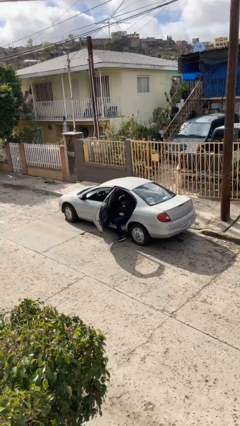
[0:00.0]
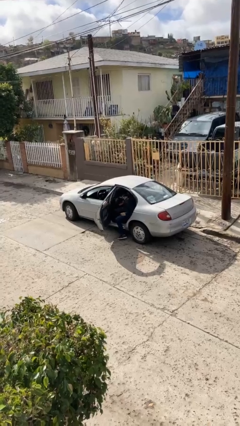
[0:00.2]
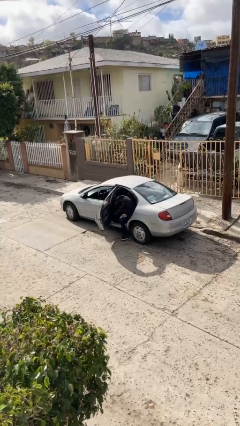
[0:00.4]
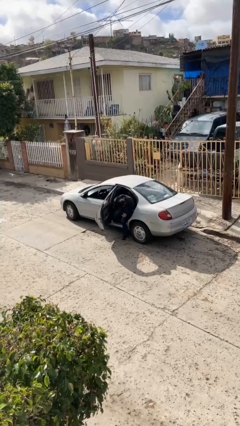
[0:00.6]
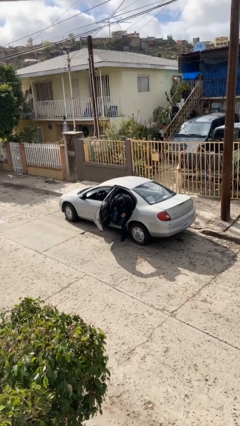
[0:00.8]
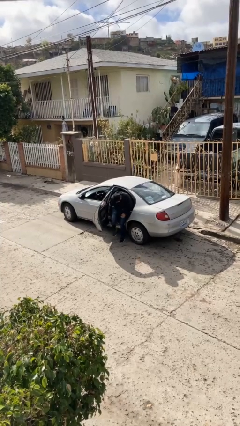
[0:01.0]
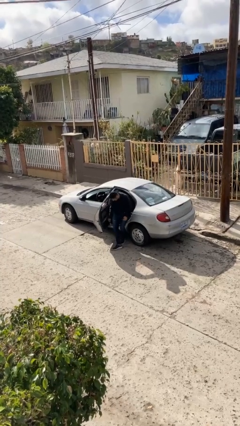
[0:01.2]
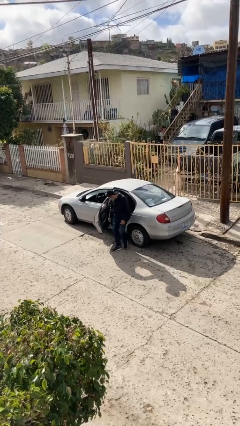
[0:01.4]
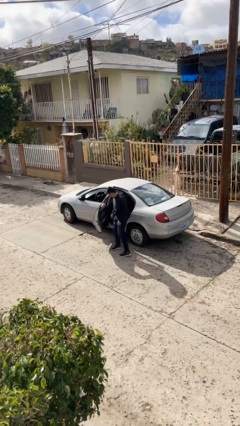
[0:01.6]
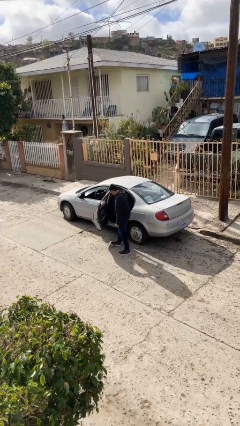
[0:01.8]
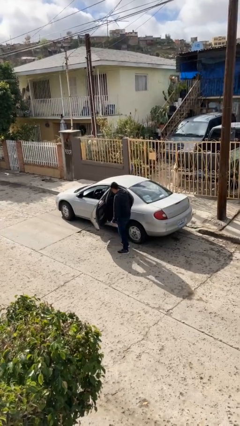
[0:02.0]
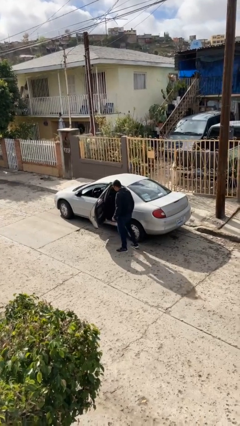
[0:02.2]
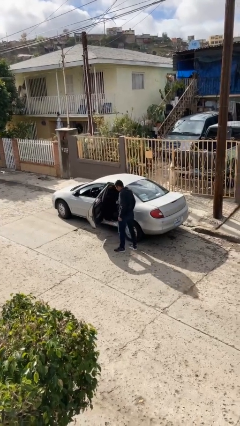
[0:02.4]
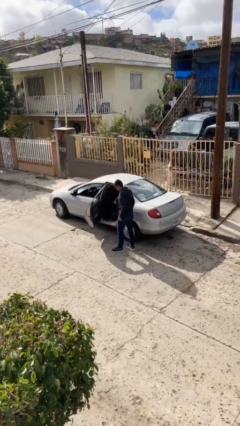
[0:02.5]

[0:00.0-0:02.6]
person exits car

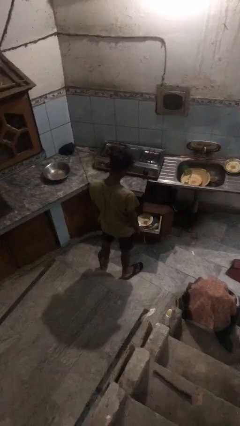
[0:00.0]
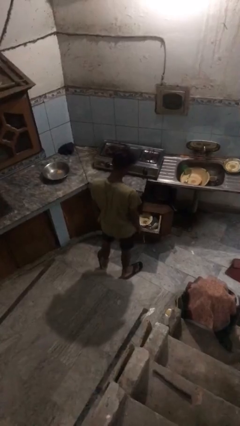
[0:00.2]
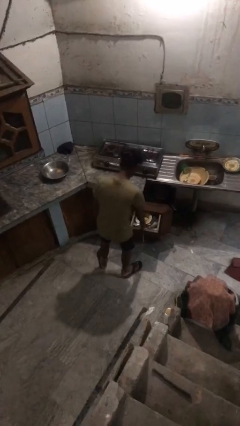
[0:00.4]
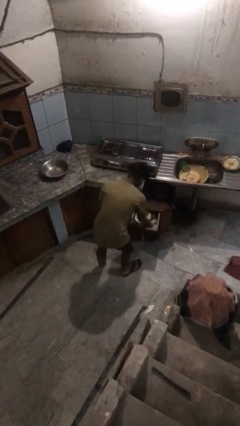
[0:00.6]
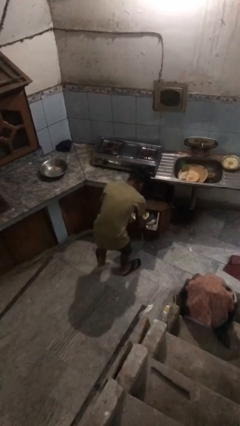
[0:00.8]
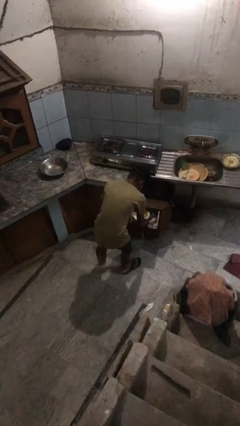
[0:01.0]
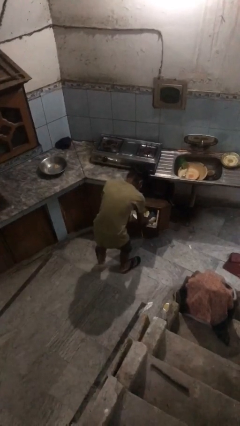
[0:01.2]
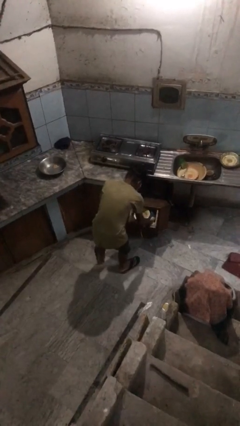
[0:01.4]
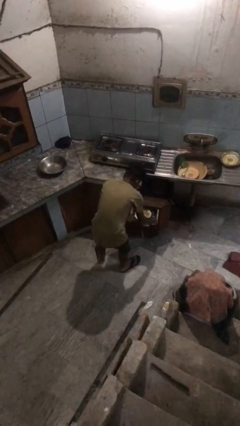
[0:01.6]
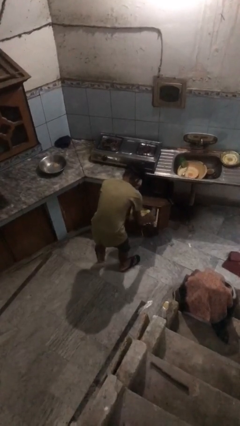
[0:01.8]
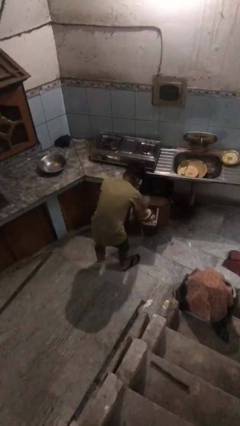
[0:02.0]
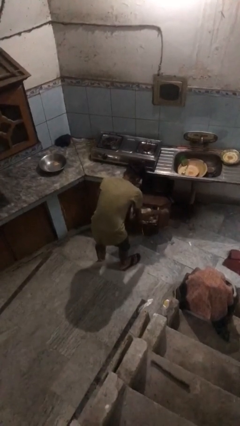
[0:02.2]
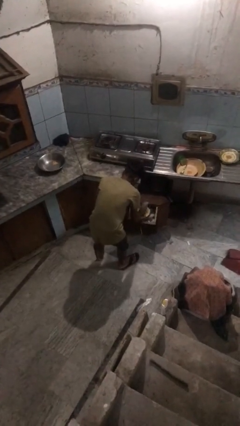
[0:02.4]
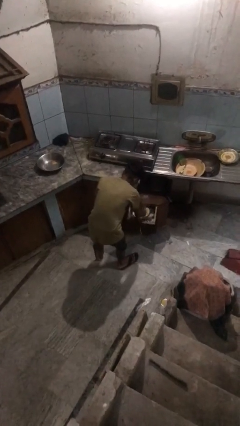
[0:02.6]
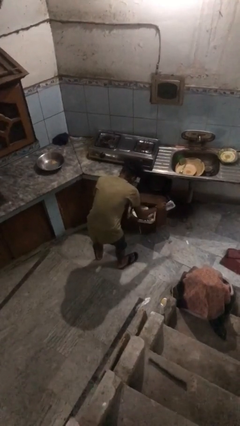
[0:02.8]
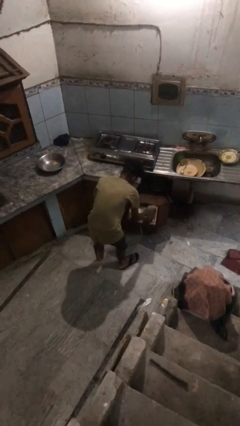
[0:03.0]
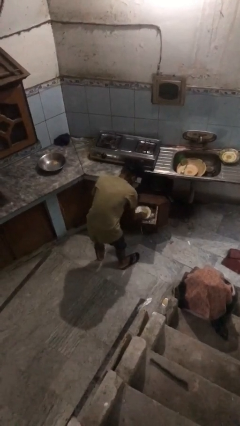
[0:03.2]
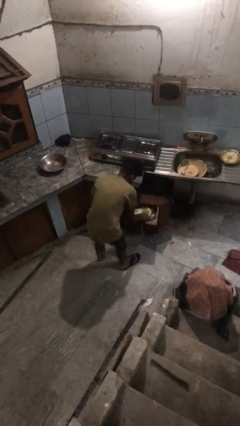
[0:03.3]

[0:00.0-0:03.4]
person searches in kitchen drawer

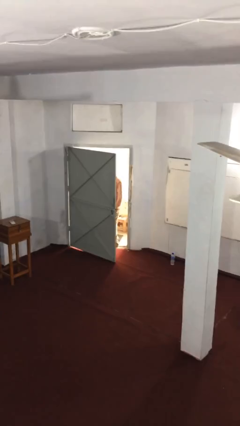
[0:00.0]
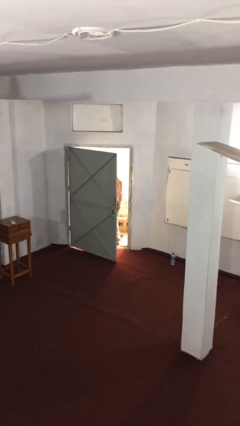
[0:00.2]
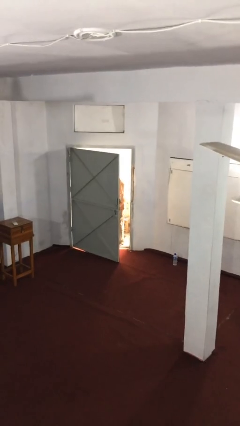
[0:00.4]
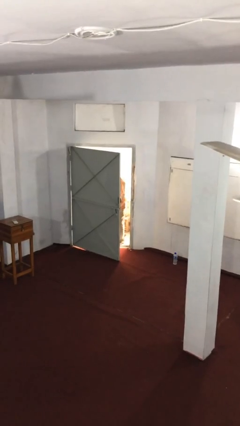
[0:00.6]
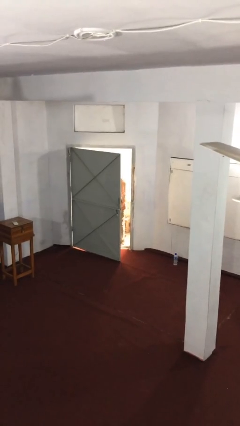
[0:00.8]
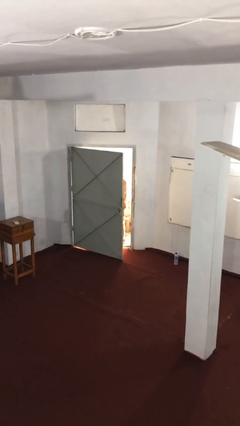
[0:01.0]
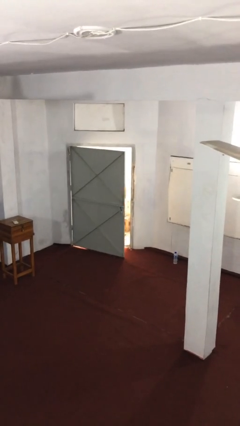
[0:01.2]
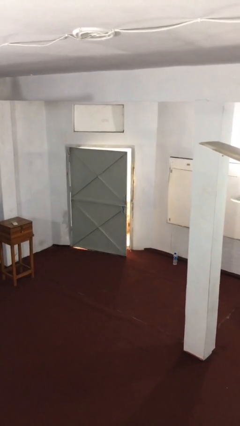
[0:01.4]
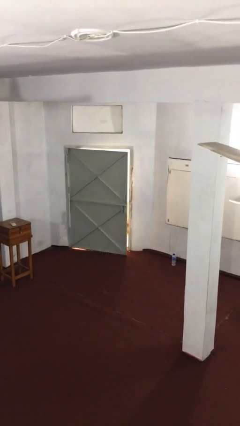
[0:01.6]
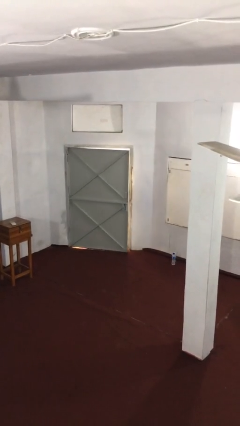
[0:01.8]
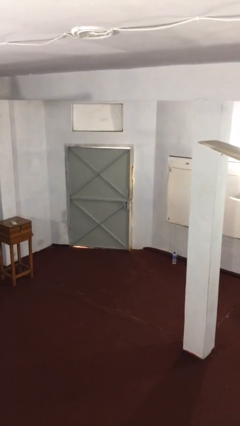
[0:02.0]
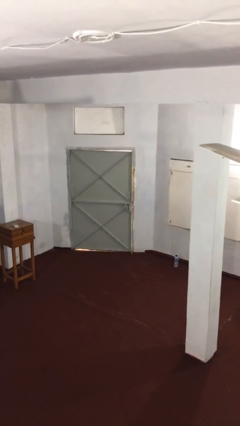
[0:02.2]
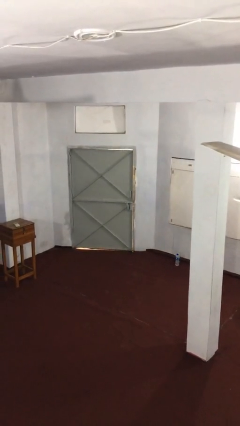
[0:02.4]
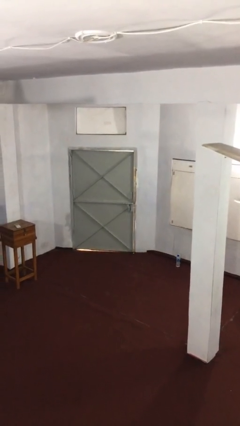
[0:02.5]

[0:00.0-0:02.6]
person closes facility door

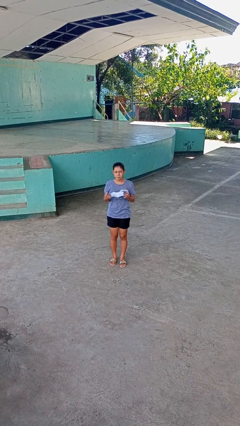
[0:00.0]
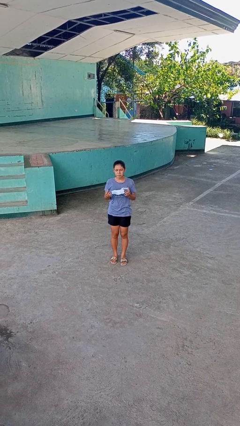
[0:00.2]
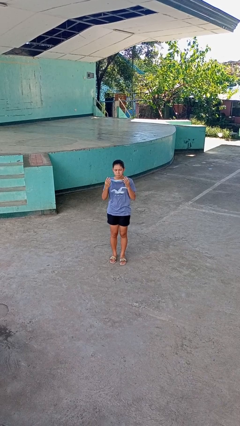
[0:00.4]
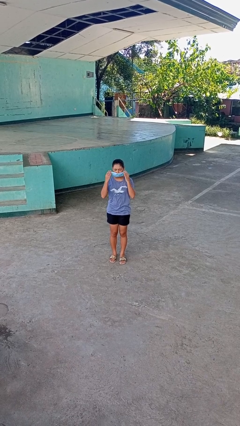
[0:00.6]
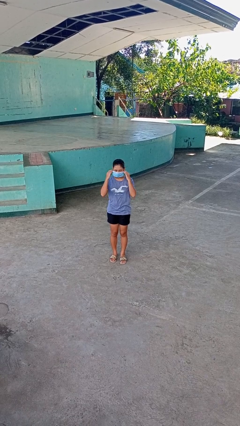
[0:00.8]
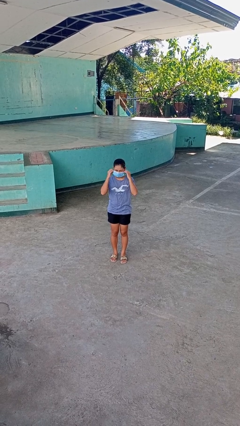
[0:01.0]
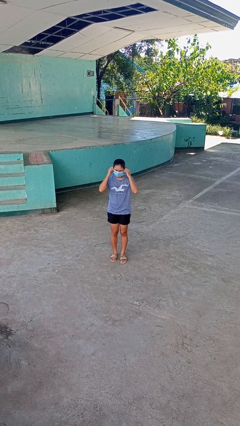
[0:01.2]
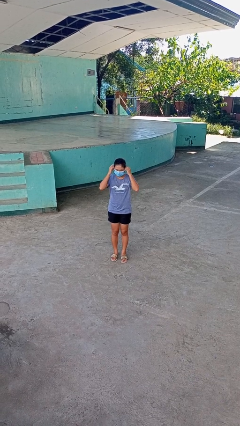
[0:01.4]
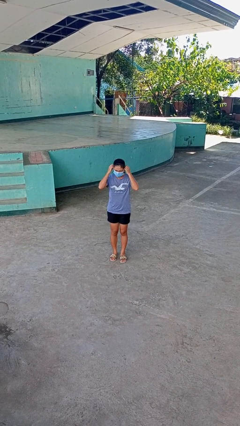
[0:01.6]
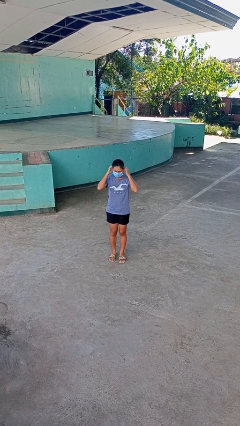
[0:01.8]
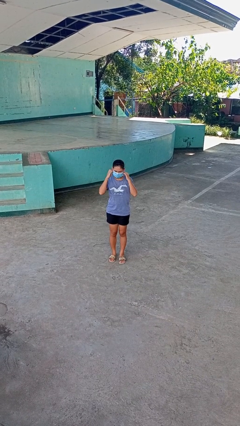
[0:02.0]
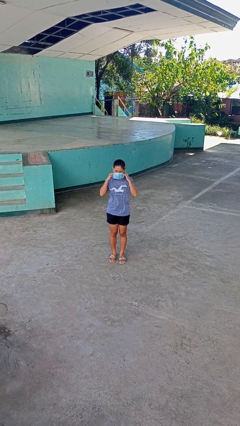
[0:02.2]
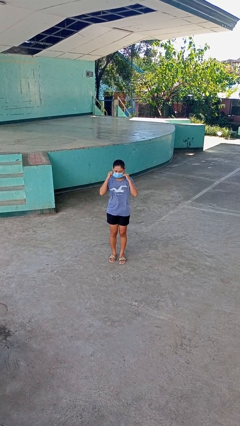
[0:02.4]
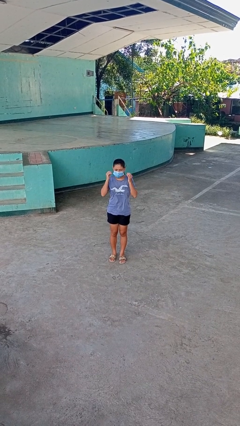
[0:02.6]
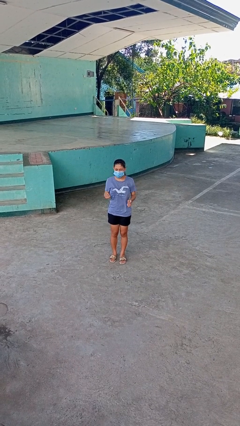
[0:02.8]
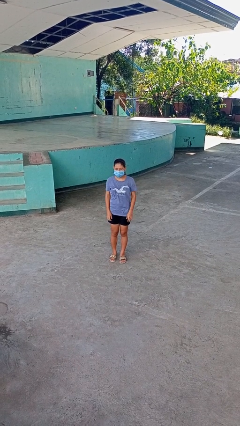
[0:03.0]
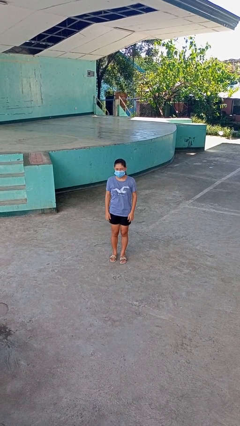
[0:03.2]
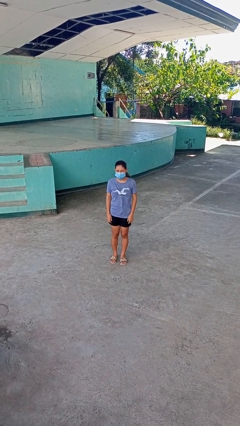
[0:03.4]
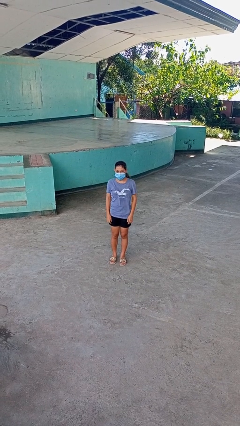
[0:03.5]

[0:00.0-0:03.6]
person puts on facemask

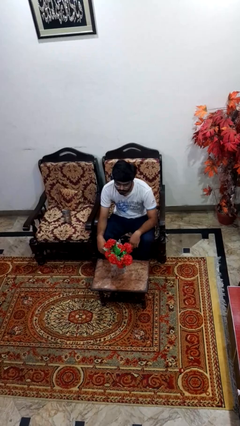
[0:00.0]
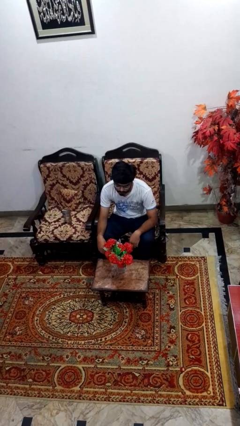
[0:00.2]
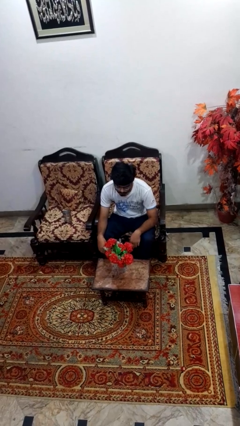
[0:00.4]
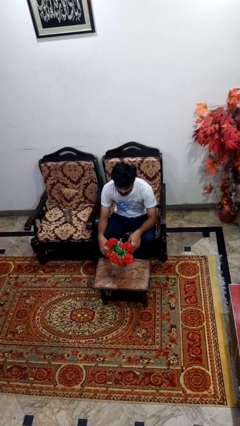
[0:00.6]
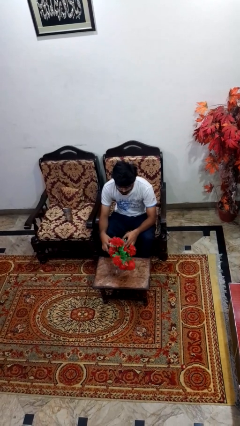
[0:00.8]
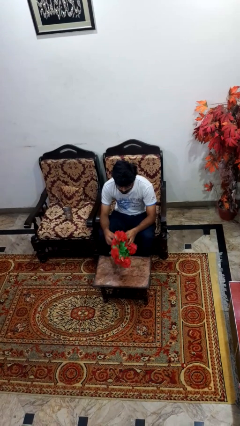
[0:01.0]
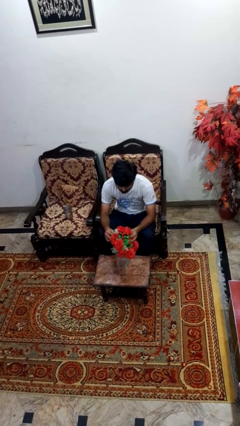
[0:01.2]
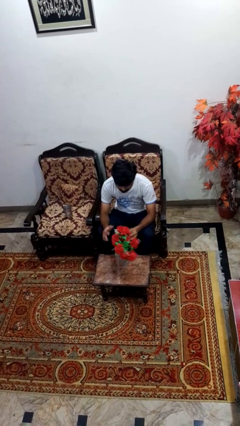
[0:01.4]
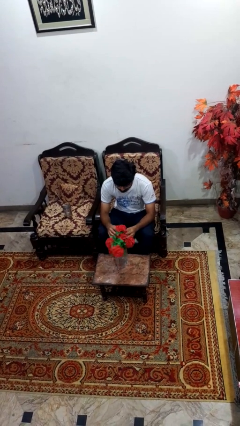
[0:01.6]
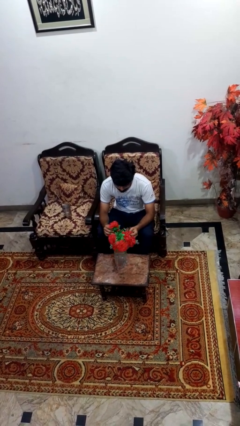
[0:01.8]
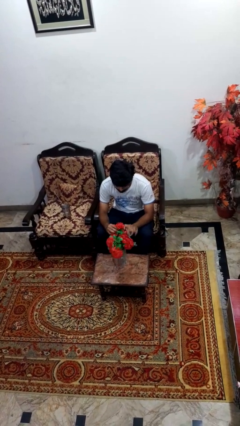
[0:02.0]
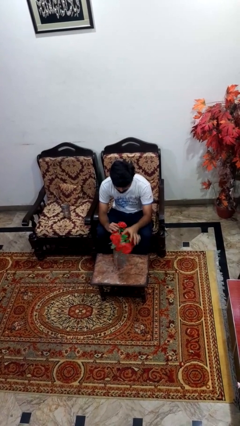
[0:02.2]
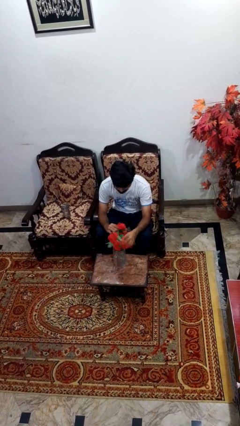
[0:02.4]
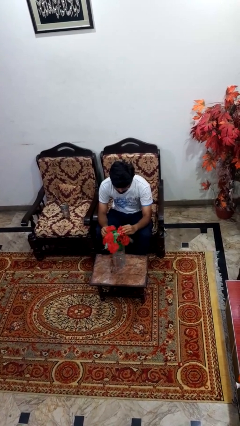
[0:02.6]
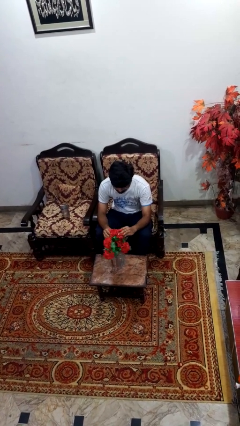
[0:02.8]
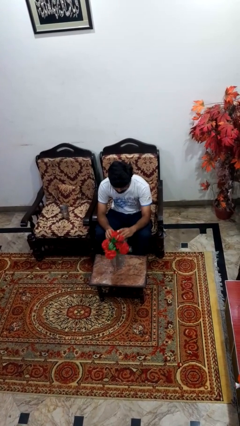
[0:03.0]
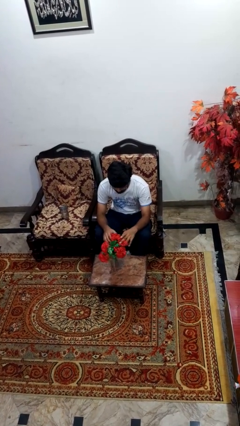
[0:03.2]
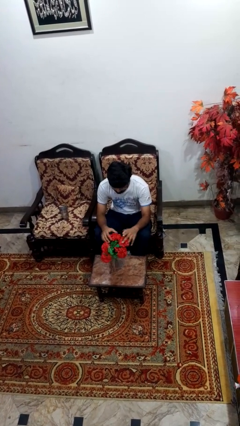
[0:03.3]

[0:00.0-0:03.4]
person arranges flowers in vase

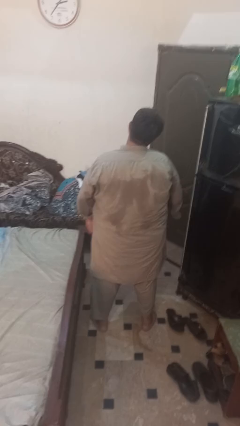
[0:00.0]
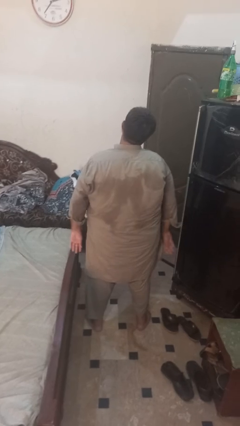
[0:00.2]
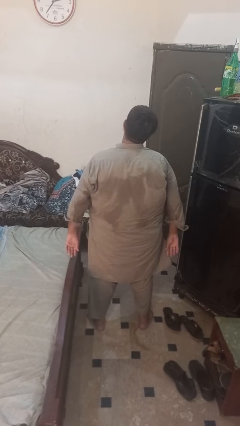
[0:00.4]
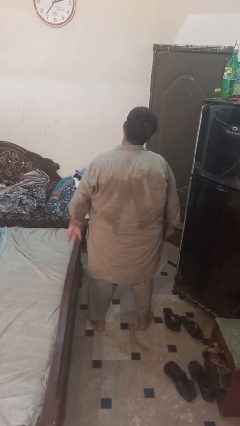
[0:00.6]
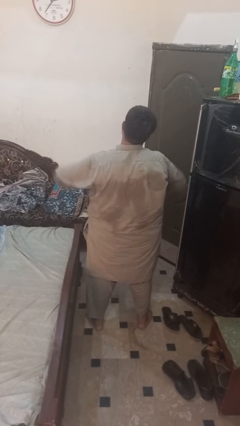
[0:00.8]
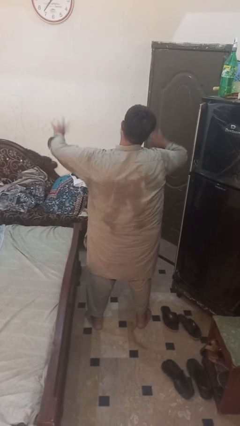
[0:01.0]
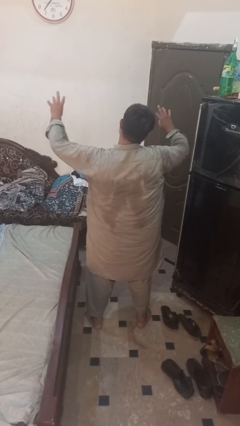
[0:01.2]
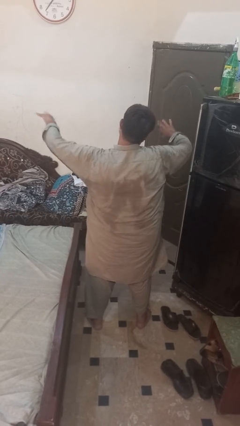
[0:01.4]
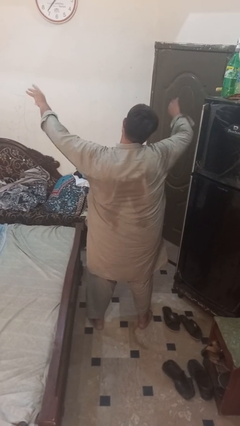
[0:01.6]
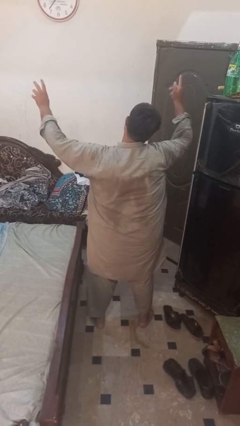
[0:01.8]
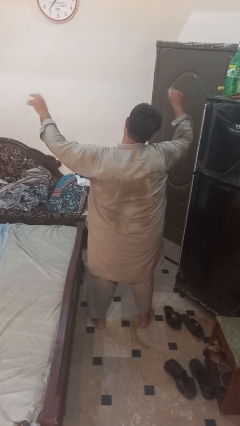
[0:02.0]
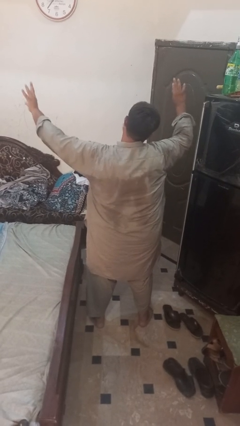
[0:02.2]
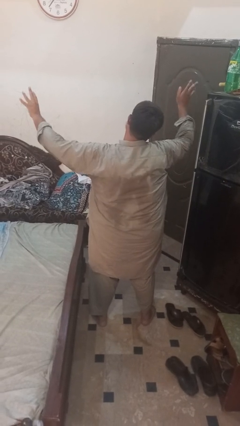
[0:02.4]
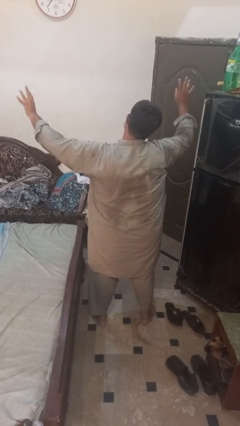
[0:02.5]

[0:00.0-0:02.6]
person dances in place
